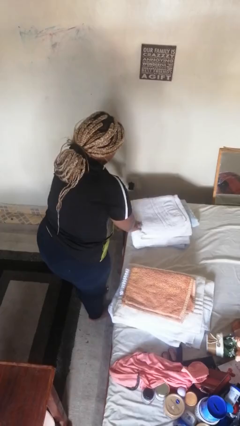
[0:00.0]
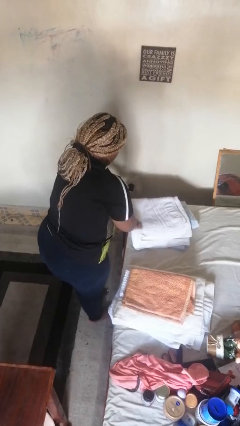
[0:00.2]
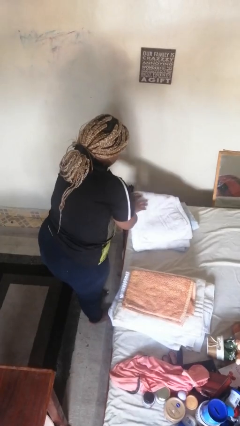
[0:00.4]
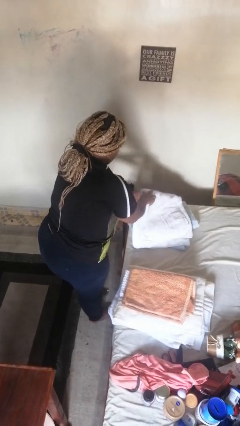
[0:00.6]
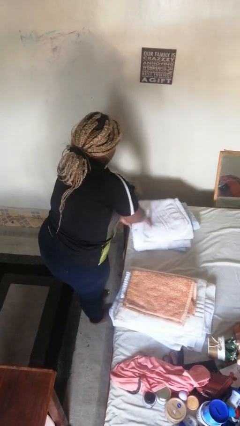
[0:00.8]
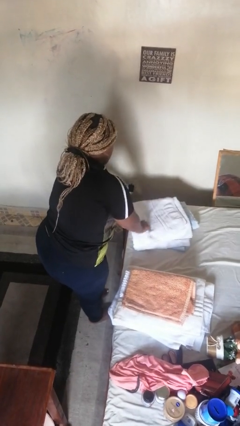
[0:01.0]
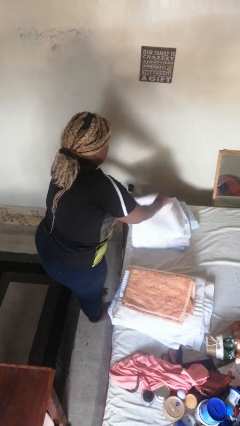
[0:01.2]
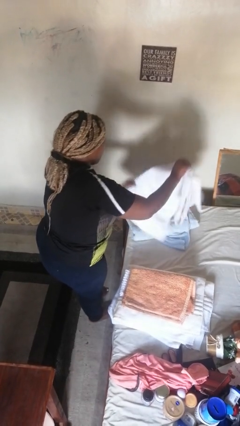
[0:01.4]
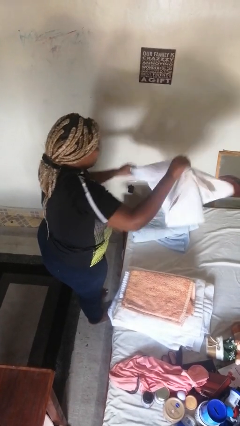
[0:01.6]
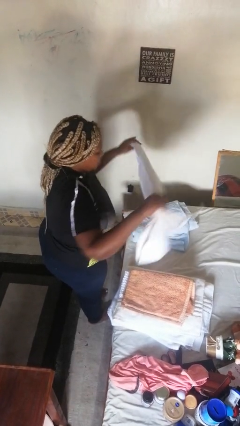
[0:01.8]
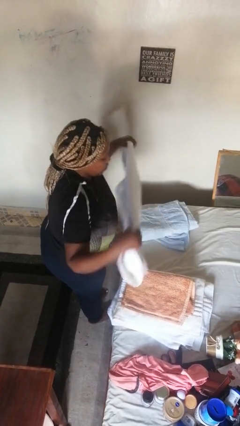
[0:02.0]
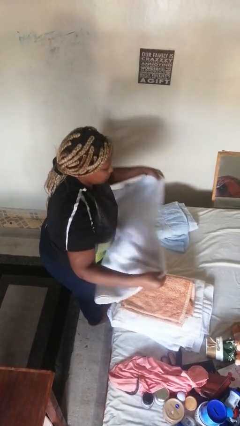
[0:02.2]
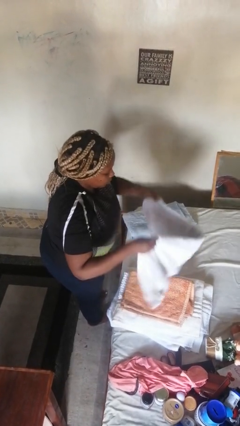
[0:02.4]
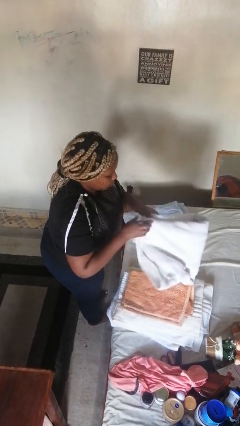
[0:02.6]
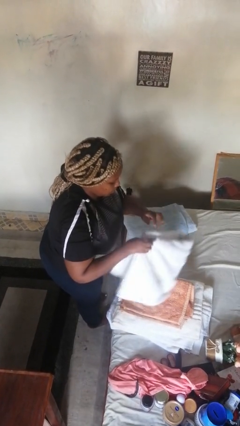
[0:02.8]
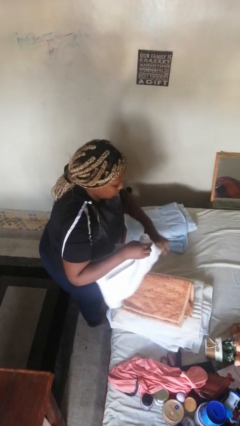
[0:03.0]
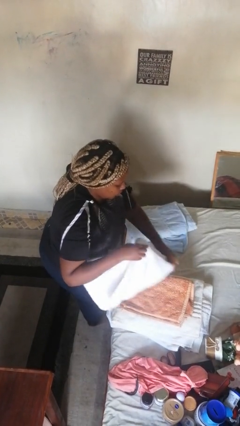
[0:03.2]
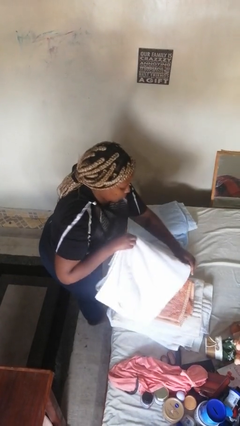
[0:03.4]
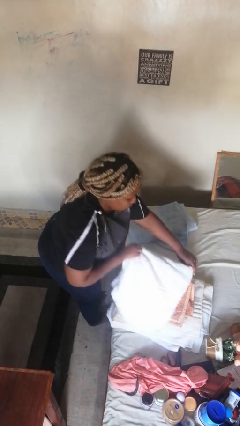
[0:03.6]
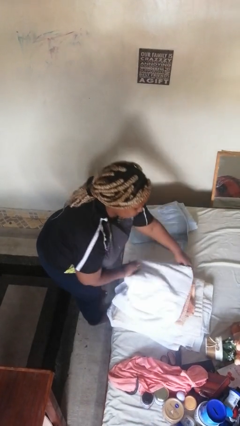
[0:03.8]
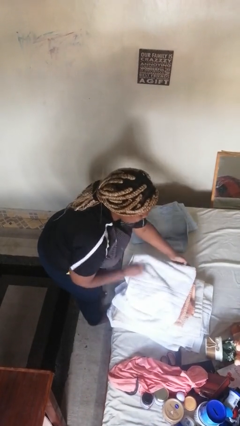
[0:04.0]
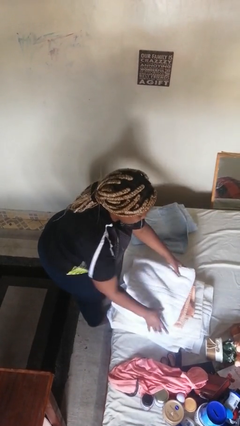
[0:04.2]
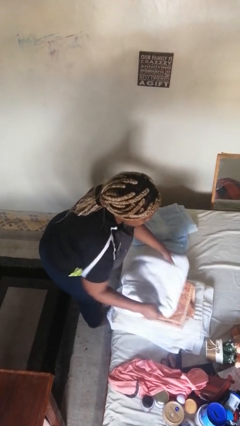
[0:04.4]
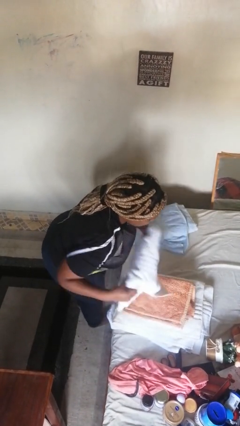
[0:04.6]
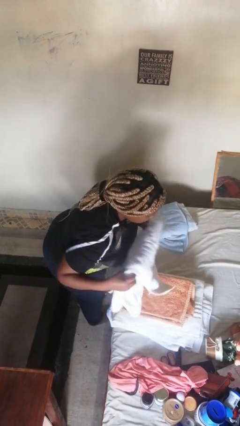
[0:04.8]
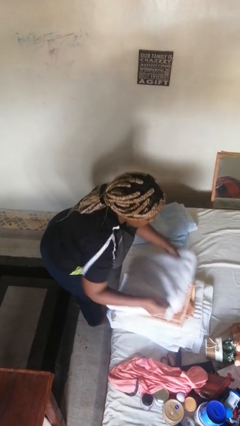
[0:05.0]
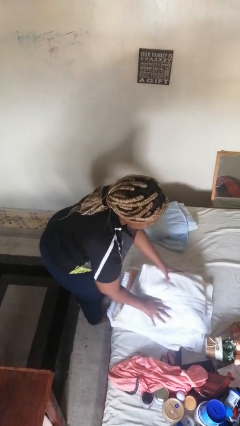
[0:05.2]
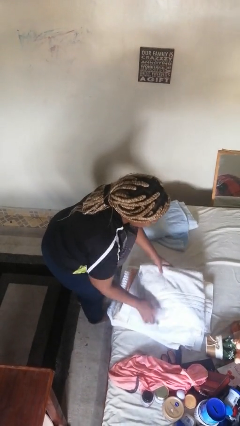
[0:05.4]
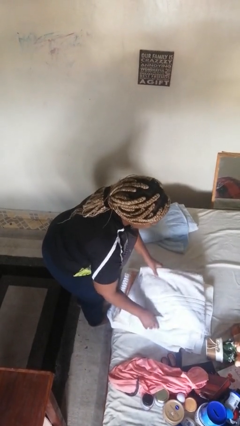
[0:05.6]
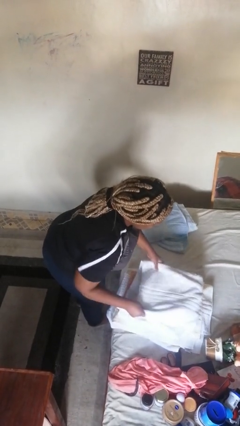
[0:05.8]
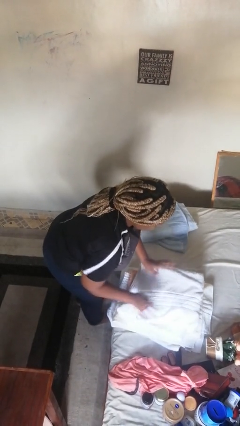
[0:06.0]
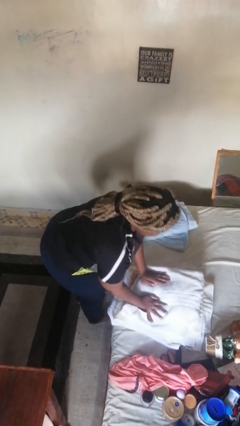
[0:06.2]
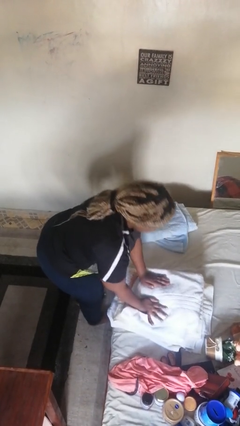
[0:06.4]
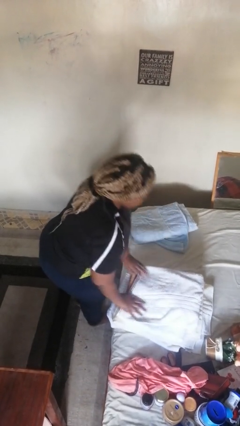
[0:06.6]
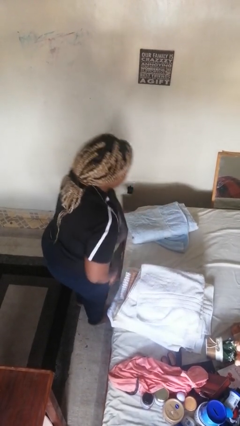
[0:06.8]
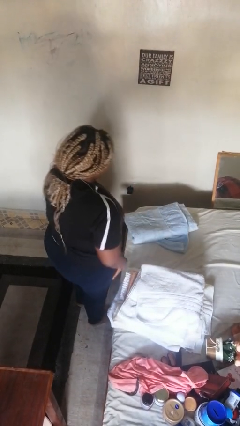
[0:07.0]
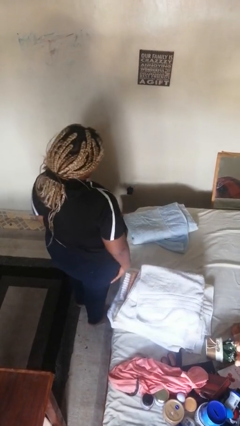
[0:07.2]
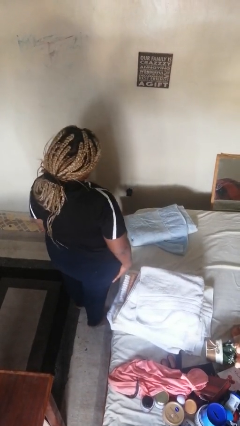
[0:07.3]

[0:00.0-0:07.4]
person folds towel

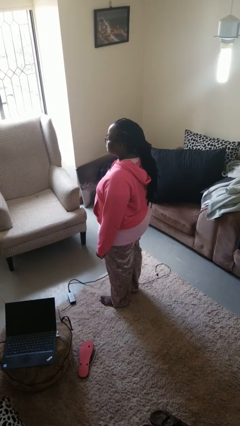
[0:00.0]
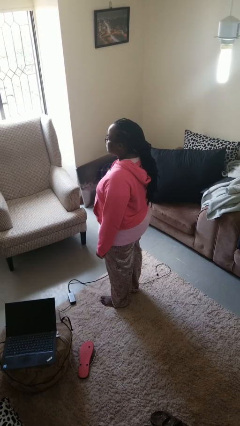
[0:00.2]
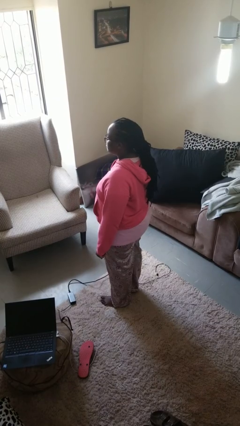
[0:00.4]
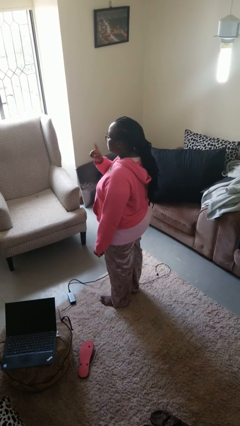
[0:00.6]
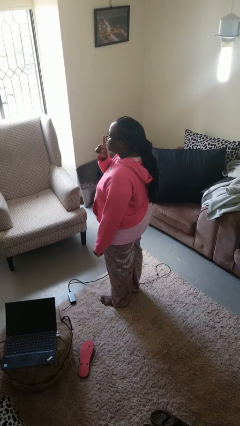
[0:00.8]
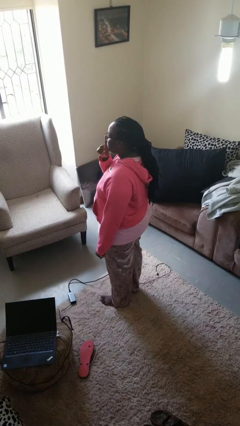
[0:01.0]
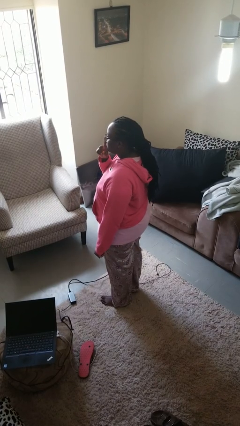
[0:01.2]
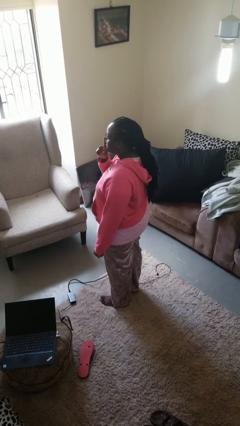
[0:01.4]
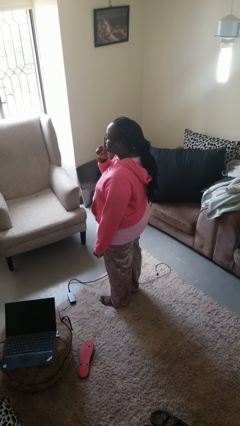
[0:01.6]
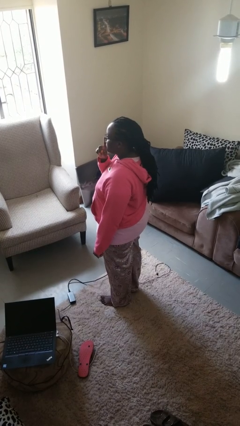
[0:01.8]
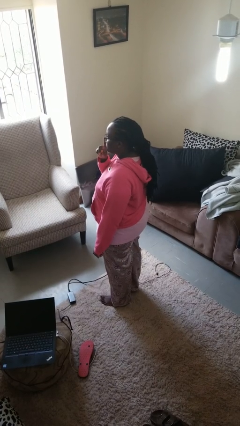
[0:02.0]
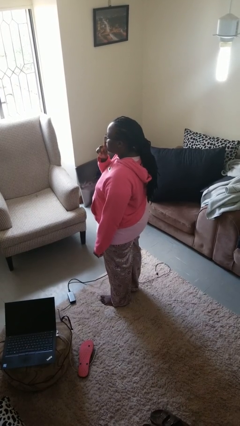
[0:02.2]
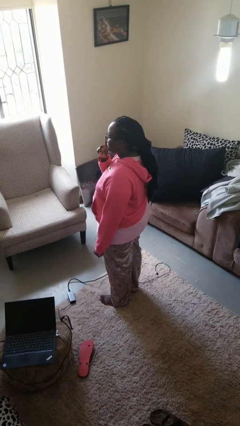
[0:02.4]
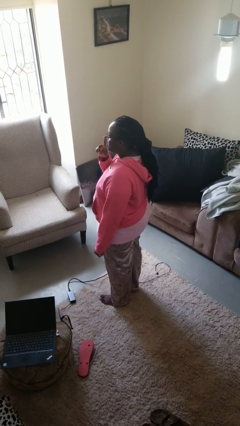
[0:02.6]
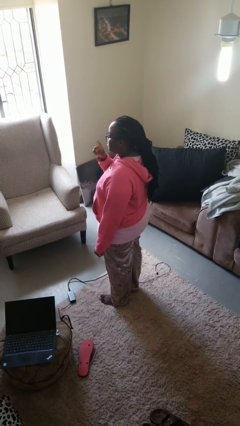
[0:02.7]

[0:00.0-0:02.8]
person gestures be quiet

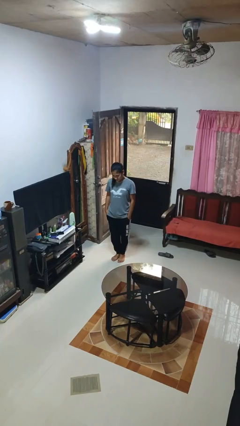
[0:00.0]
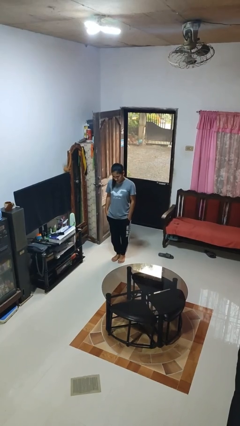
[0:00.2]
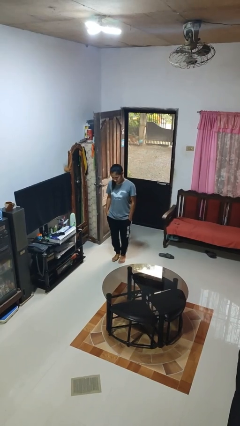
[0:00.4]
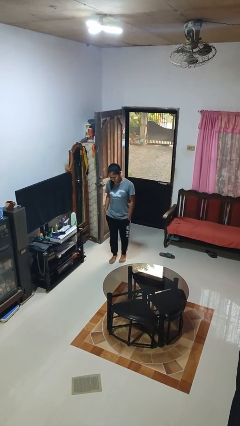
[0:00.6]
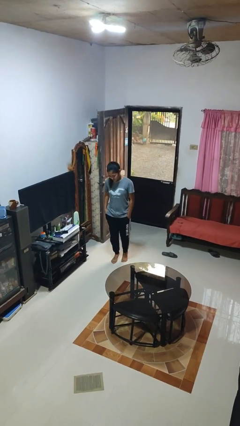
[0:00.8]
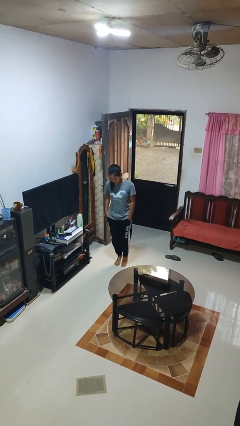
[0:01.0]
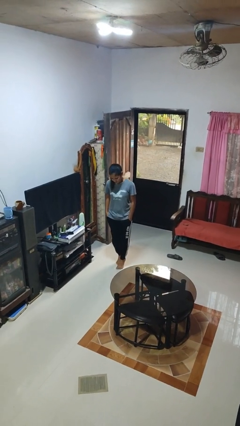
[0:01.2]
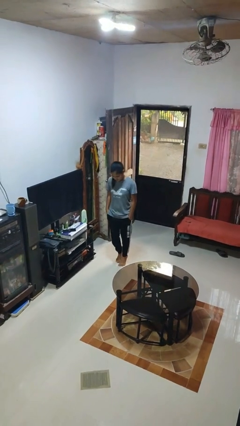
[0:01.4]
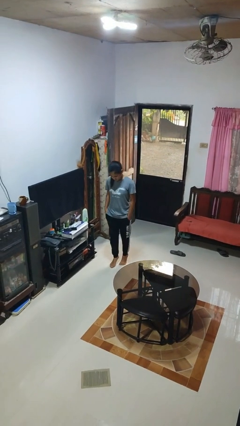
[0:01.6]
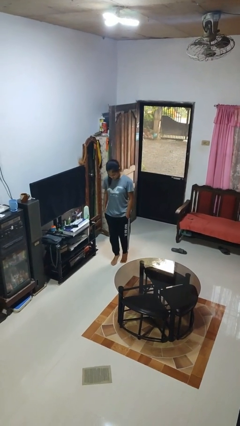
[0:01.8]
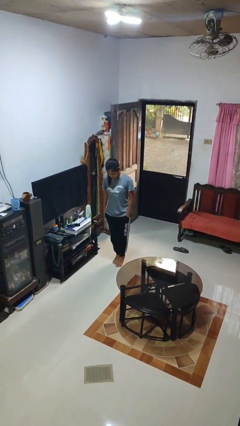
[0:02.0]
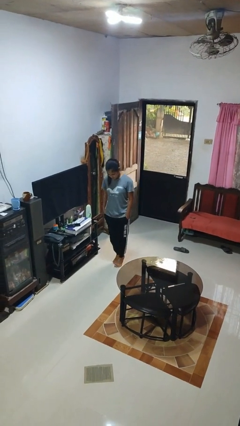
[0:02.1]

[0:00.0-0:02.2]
person walks tiptoe

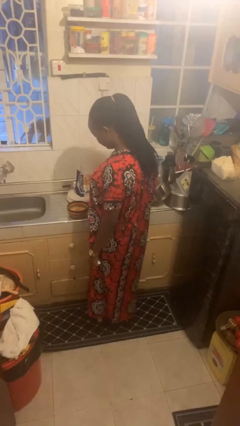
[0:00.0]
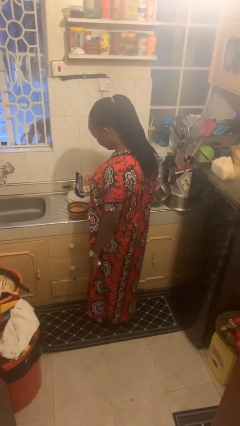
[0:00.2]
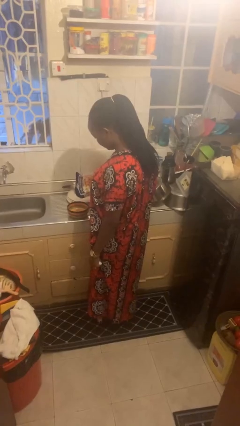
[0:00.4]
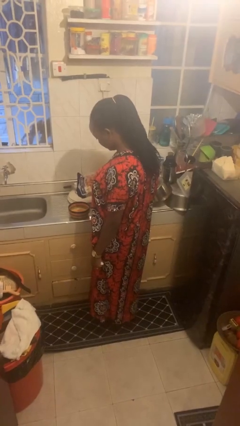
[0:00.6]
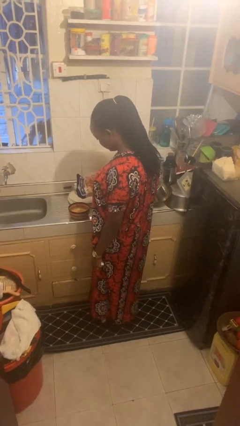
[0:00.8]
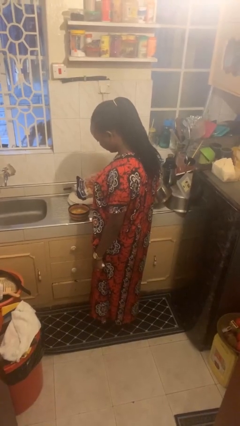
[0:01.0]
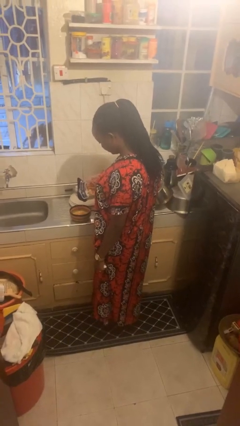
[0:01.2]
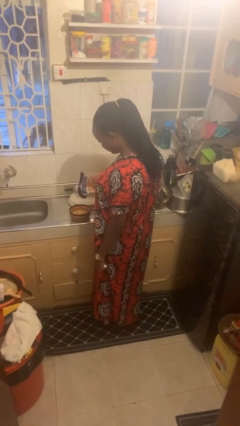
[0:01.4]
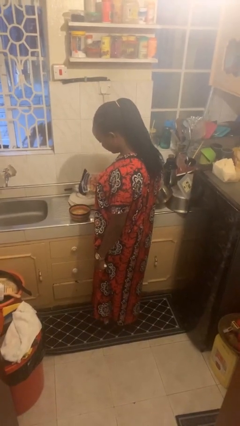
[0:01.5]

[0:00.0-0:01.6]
person pours into bowl

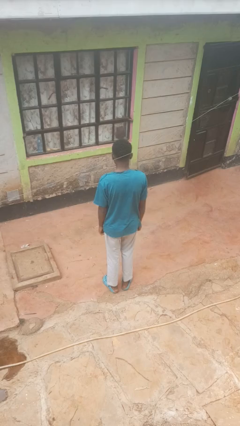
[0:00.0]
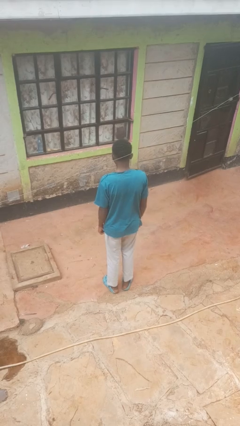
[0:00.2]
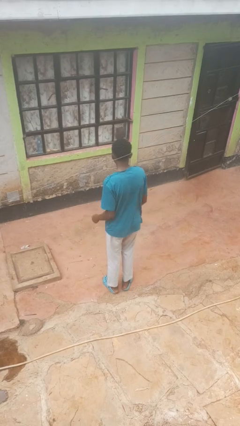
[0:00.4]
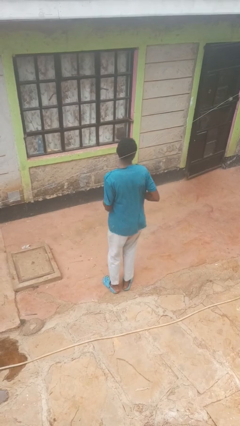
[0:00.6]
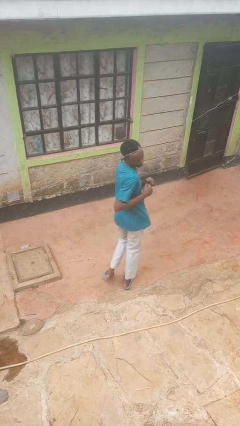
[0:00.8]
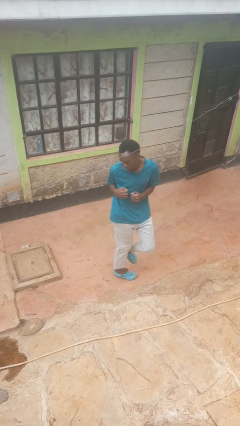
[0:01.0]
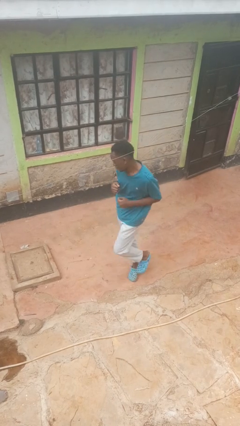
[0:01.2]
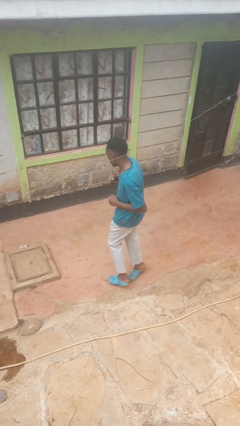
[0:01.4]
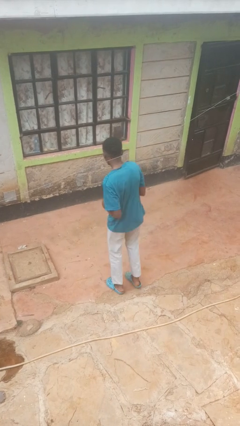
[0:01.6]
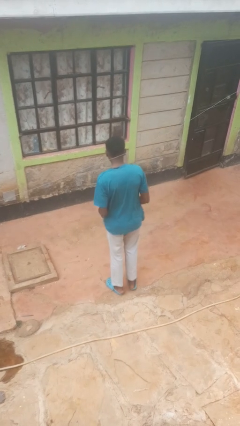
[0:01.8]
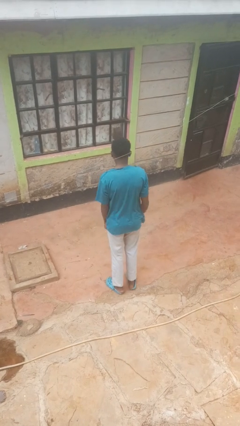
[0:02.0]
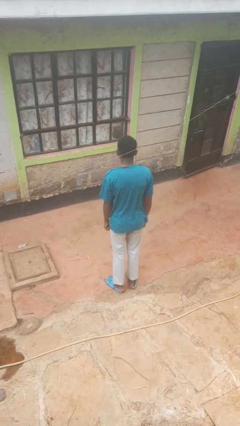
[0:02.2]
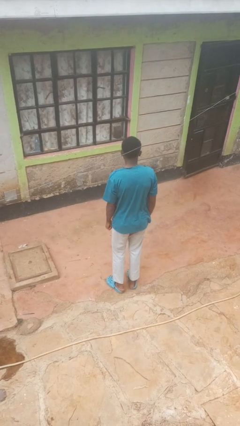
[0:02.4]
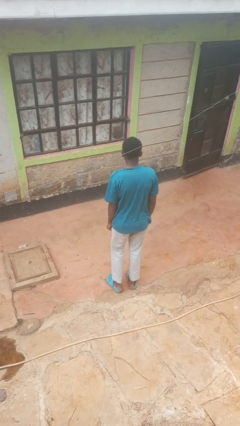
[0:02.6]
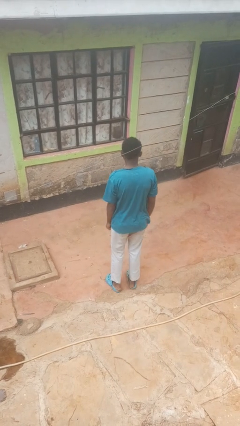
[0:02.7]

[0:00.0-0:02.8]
person twirls

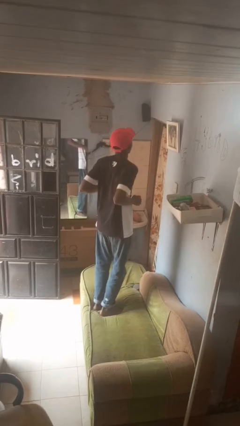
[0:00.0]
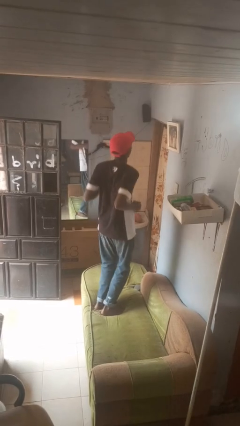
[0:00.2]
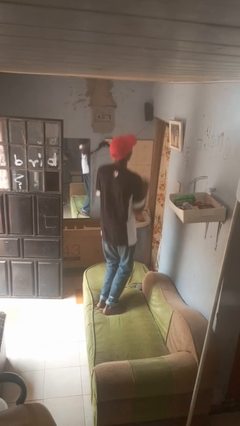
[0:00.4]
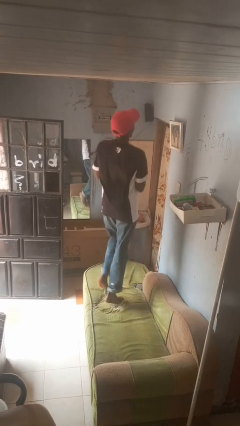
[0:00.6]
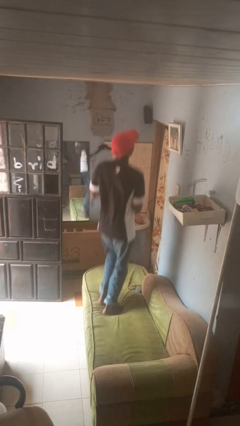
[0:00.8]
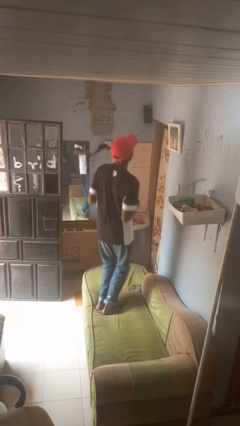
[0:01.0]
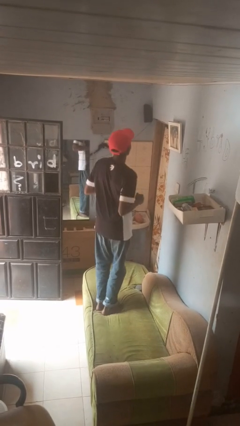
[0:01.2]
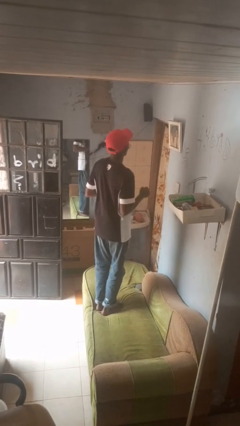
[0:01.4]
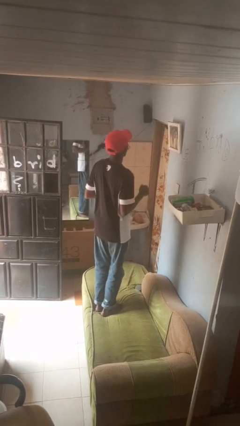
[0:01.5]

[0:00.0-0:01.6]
person jumps on couch
